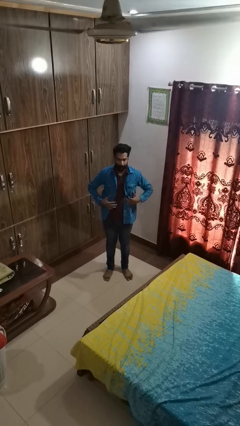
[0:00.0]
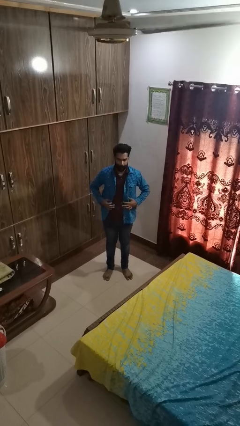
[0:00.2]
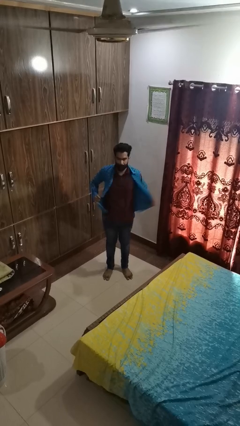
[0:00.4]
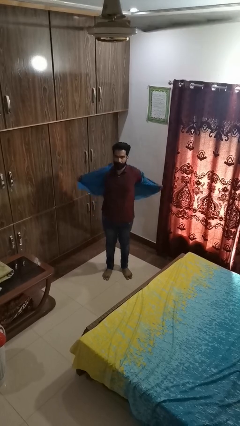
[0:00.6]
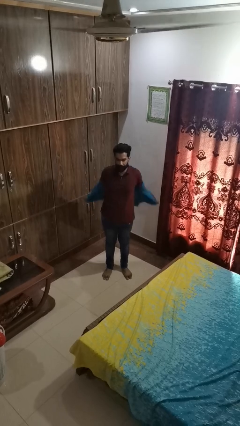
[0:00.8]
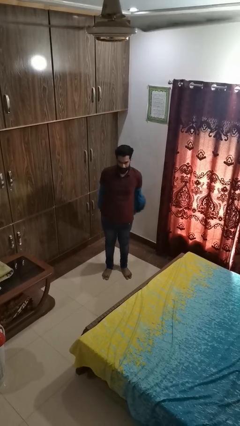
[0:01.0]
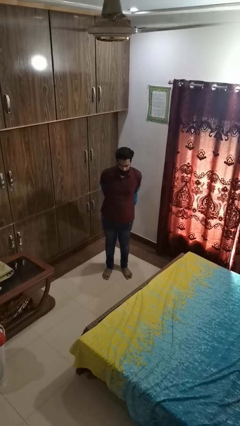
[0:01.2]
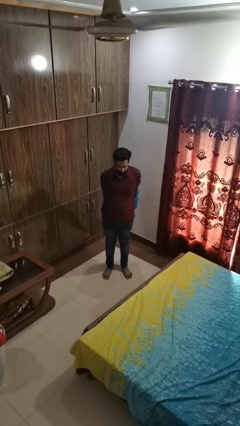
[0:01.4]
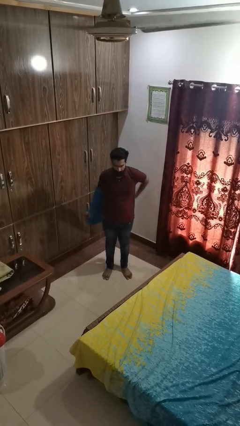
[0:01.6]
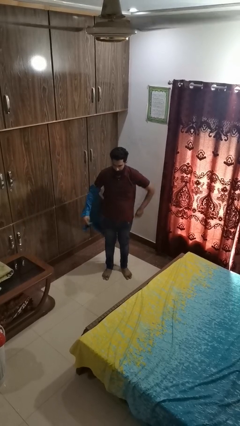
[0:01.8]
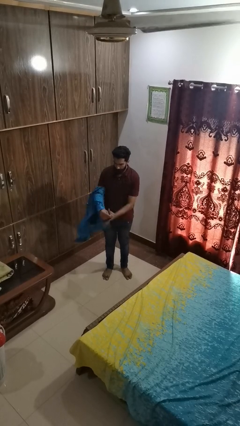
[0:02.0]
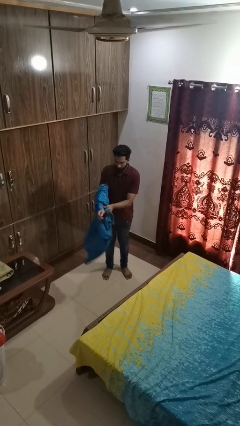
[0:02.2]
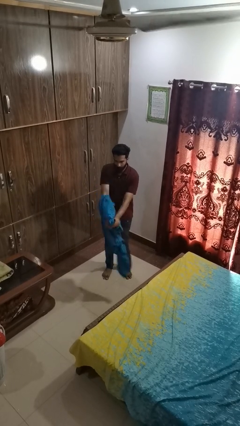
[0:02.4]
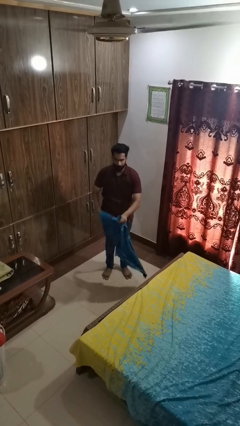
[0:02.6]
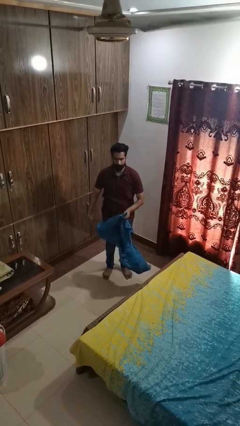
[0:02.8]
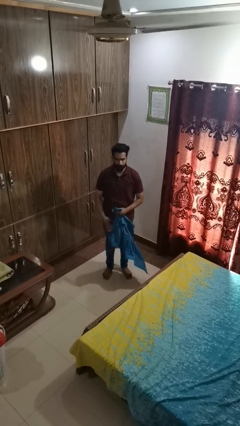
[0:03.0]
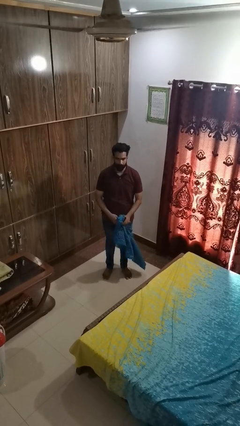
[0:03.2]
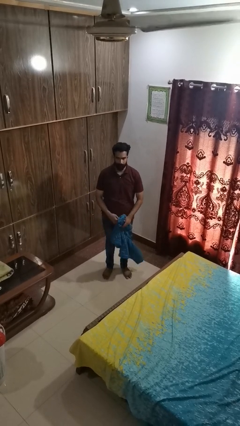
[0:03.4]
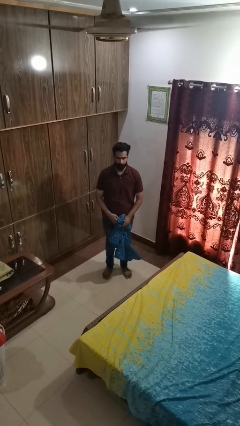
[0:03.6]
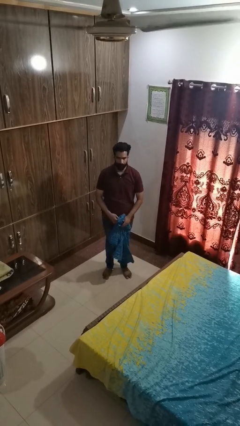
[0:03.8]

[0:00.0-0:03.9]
person takes off shirt

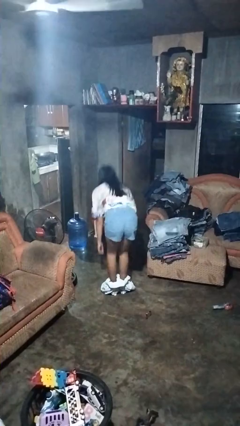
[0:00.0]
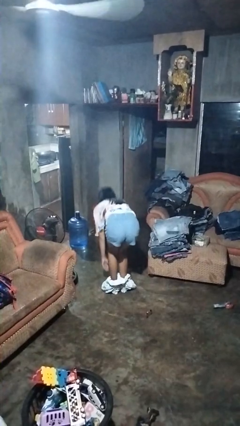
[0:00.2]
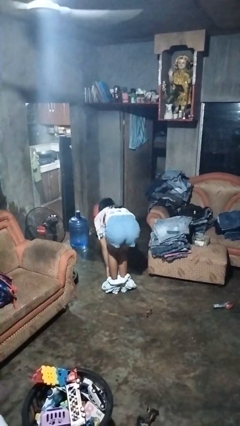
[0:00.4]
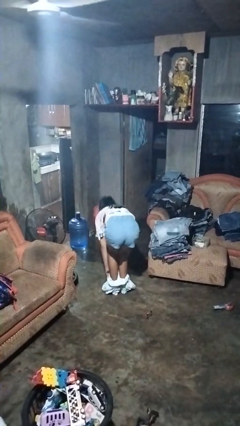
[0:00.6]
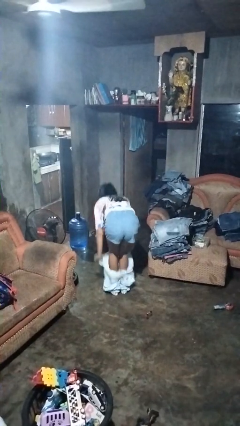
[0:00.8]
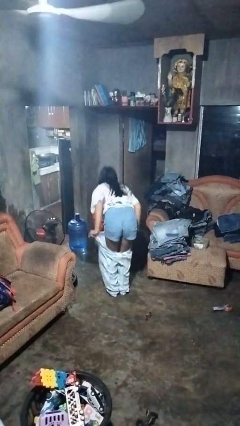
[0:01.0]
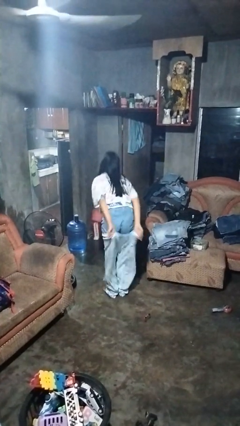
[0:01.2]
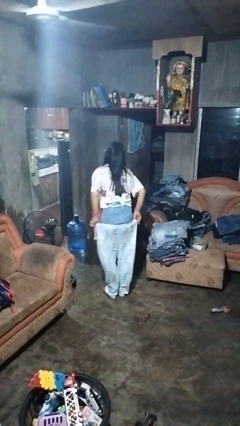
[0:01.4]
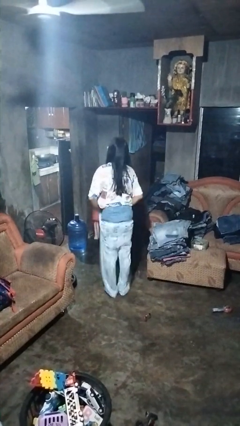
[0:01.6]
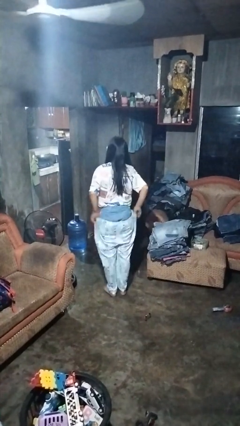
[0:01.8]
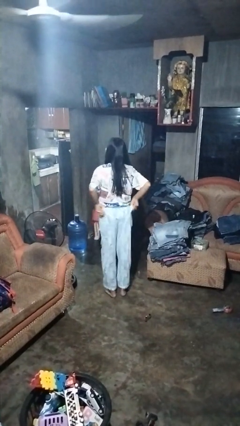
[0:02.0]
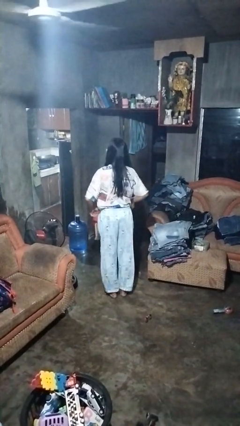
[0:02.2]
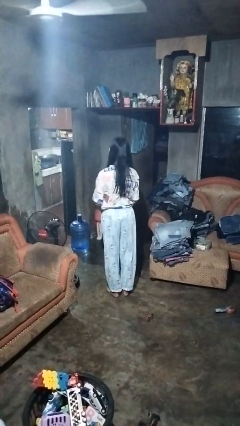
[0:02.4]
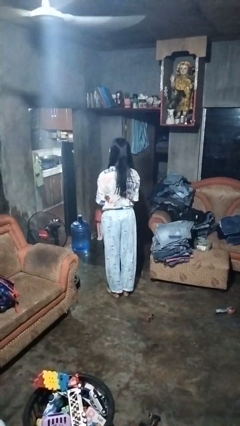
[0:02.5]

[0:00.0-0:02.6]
person puts on pants

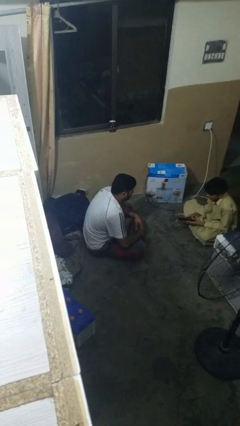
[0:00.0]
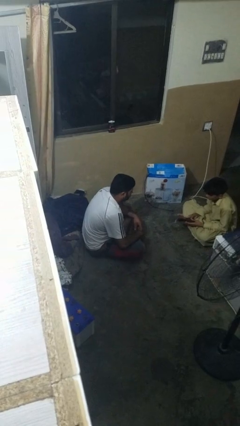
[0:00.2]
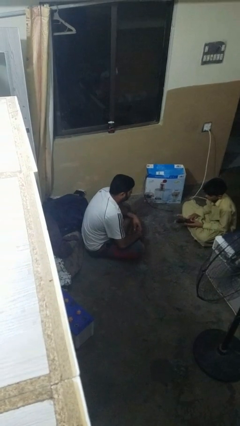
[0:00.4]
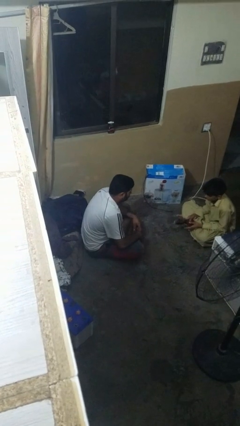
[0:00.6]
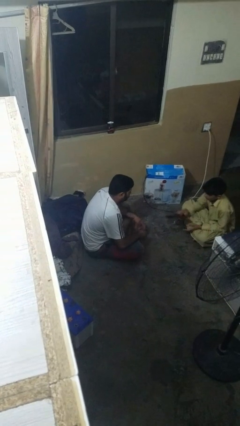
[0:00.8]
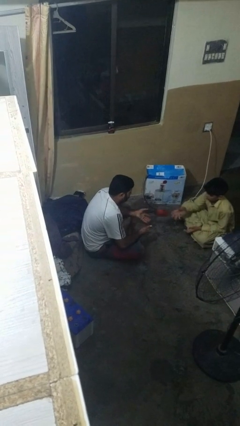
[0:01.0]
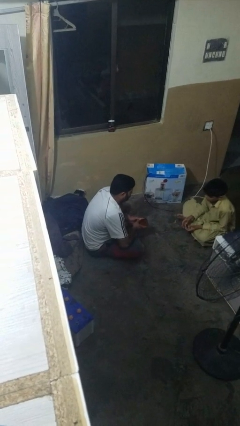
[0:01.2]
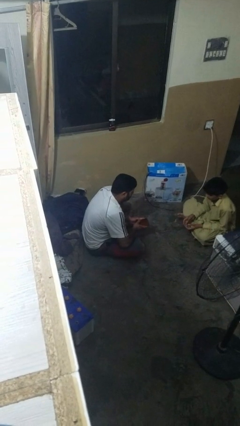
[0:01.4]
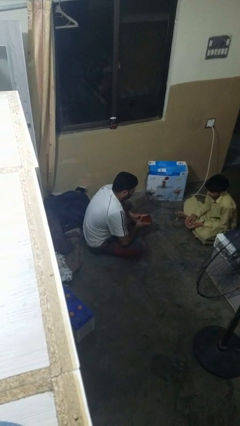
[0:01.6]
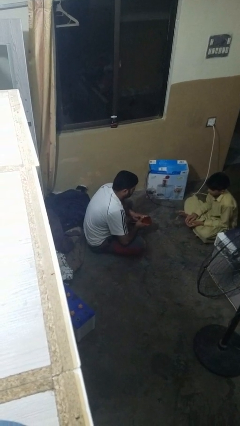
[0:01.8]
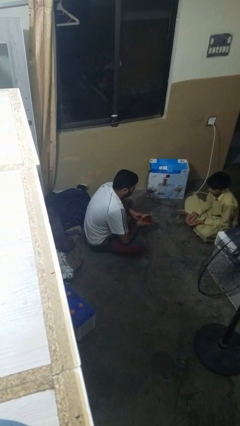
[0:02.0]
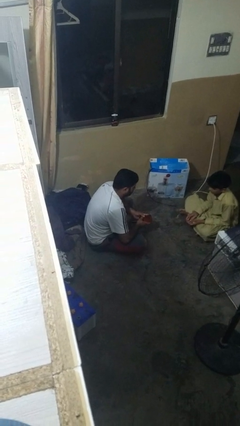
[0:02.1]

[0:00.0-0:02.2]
person catches object from person

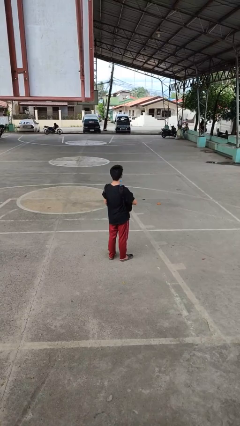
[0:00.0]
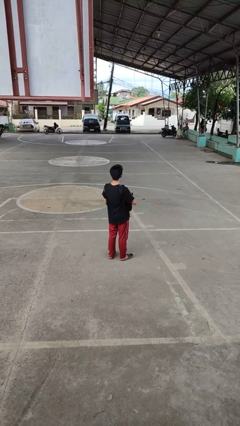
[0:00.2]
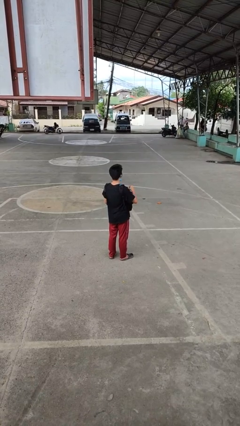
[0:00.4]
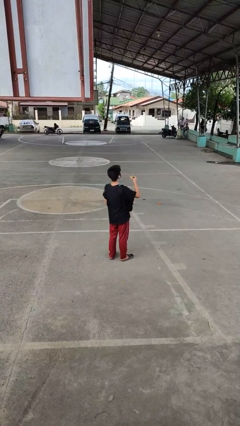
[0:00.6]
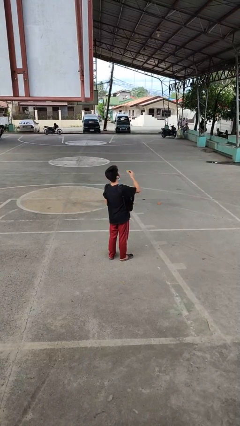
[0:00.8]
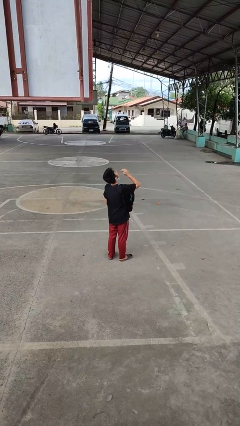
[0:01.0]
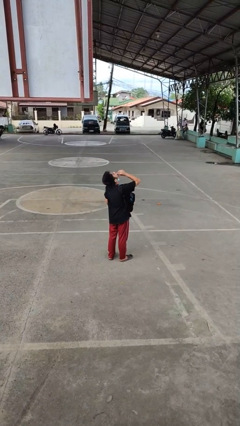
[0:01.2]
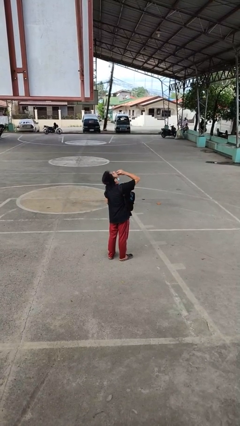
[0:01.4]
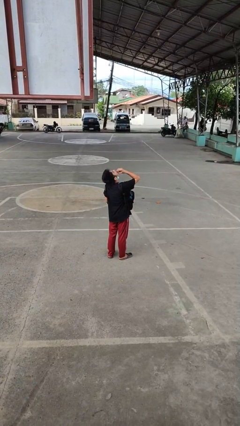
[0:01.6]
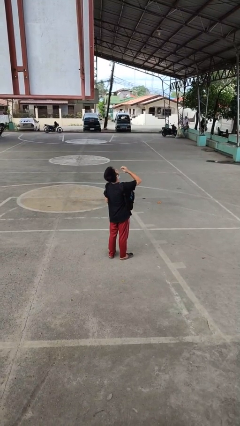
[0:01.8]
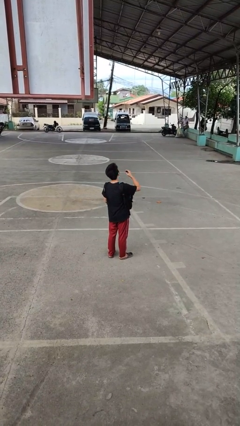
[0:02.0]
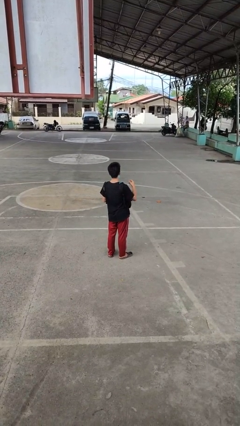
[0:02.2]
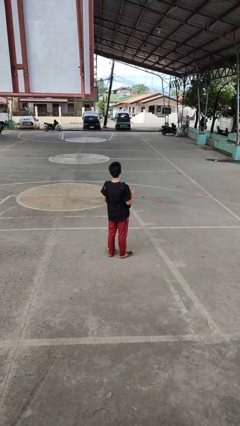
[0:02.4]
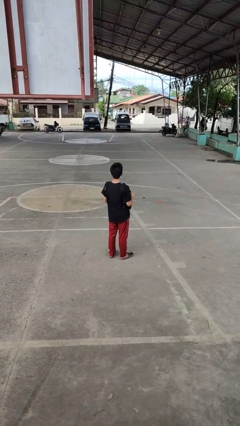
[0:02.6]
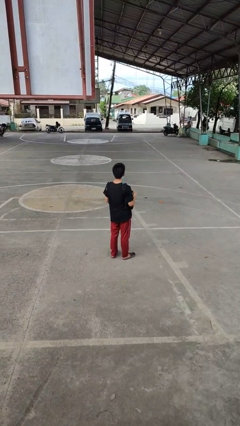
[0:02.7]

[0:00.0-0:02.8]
person eats snack from bag

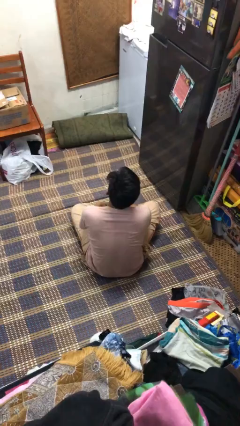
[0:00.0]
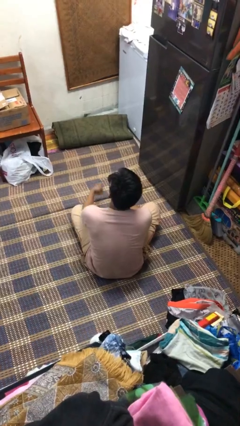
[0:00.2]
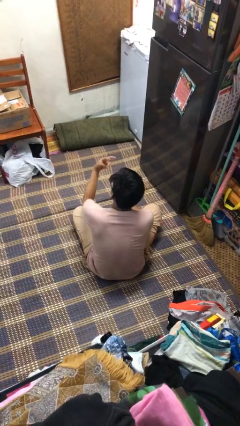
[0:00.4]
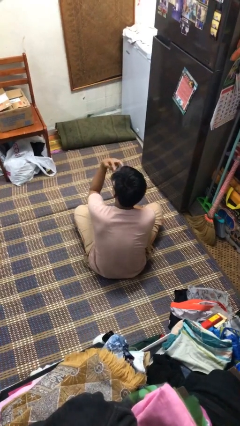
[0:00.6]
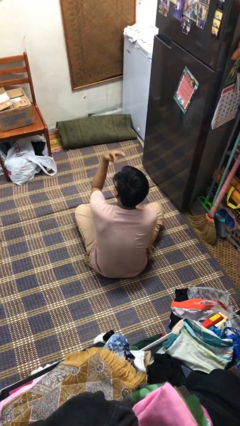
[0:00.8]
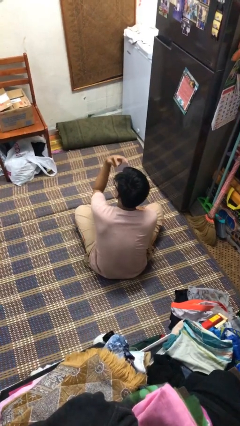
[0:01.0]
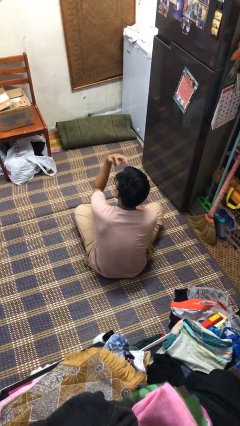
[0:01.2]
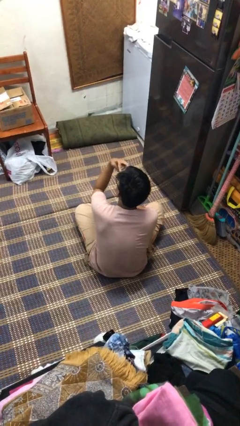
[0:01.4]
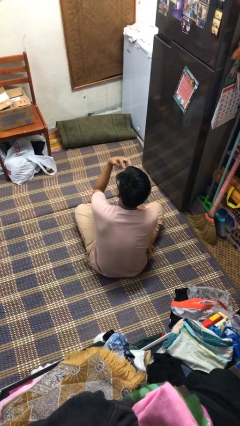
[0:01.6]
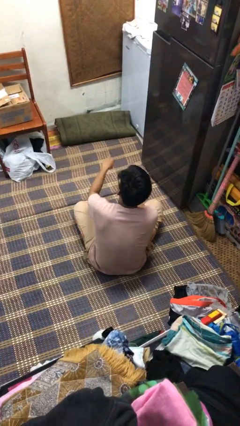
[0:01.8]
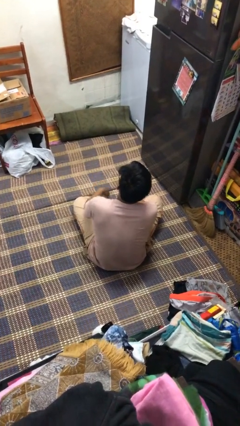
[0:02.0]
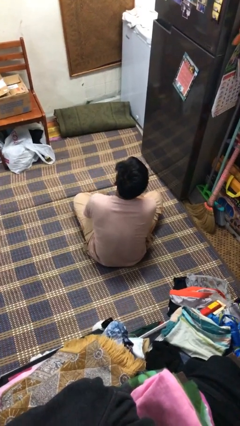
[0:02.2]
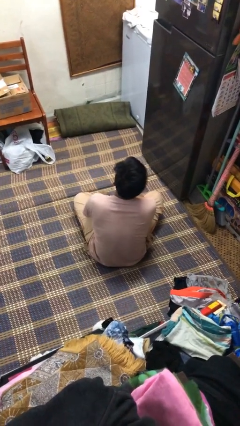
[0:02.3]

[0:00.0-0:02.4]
person gestures watch closely

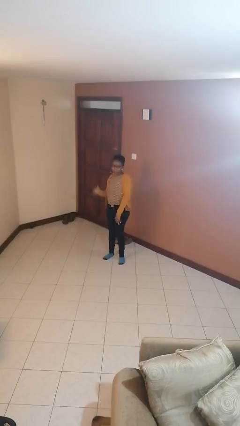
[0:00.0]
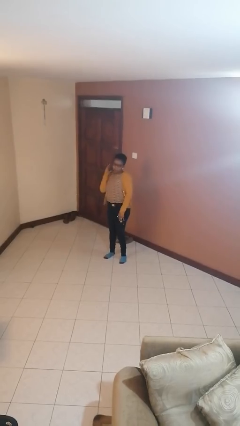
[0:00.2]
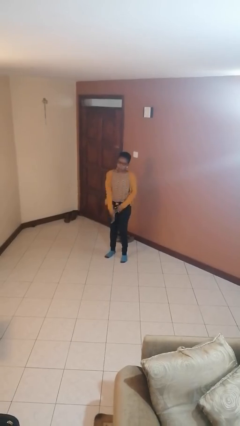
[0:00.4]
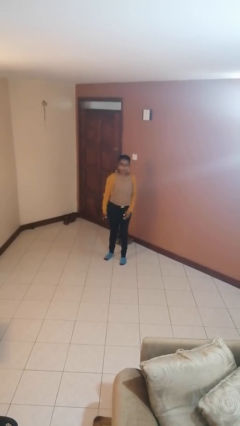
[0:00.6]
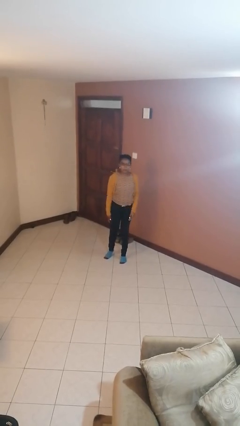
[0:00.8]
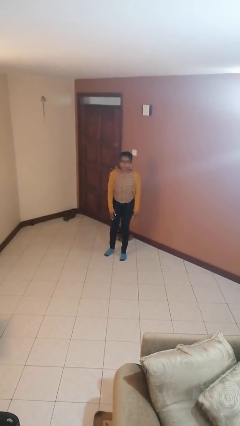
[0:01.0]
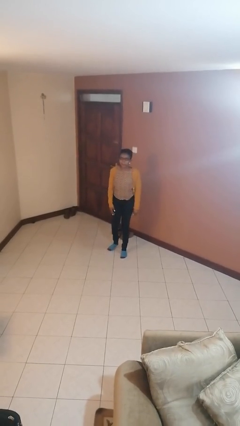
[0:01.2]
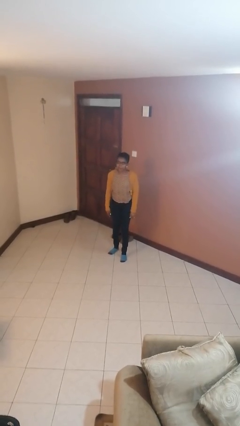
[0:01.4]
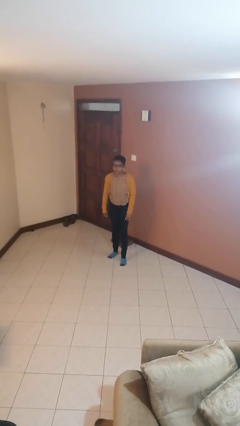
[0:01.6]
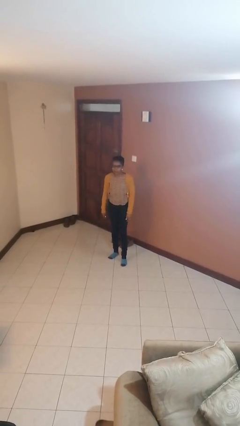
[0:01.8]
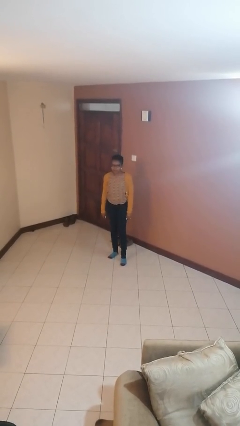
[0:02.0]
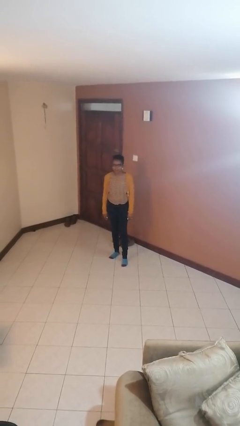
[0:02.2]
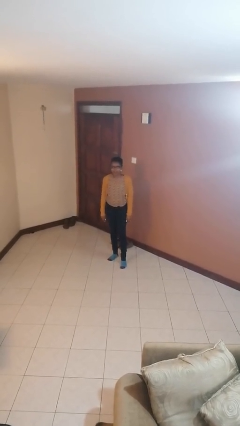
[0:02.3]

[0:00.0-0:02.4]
person karate chop

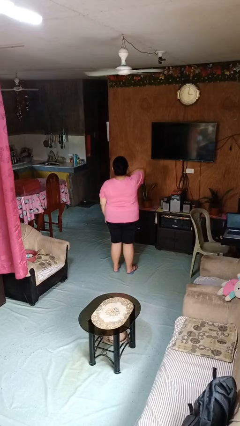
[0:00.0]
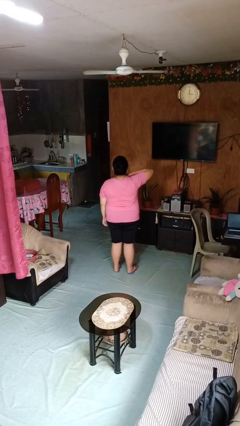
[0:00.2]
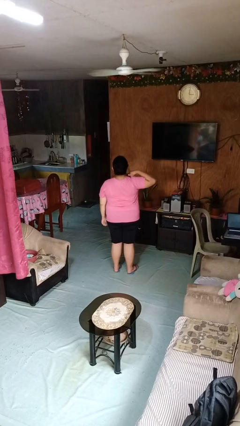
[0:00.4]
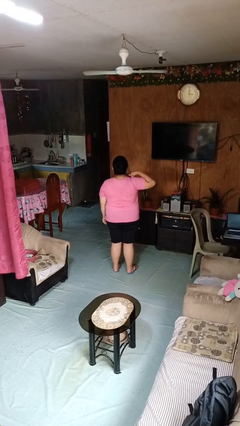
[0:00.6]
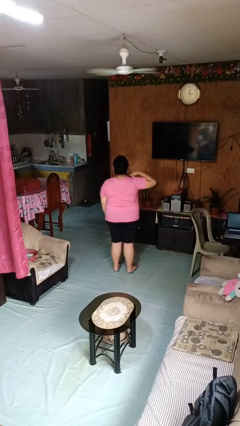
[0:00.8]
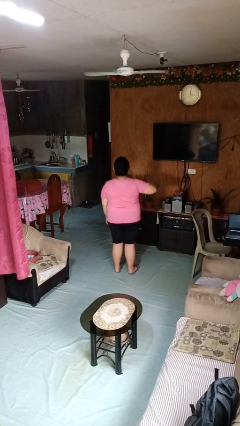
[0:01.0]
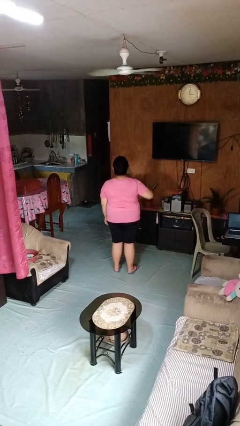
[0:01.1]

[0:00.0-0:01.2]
person gestures cut
